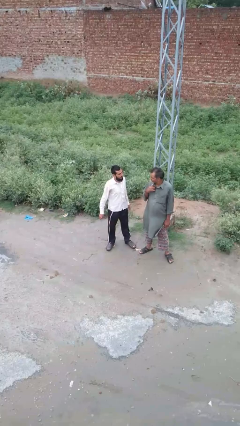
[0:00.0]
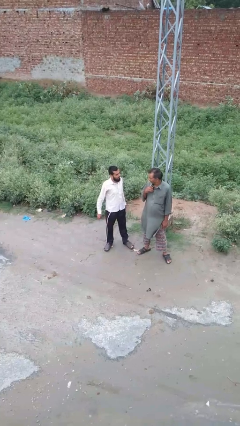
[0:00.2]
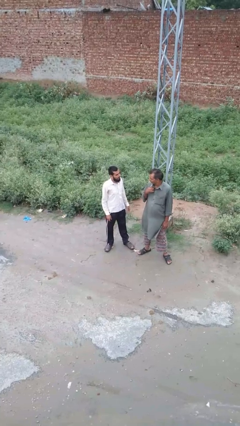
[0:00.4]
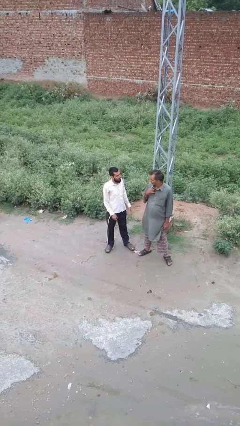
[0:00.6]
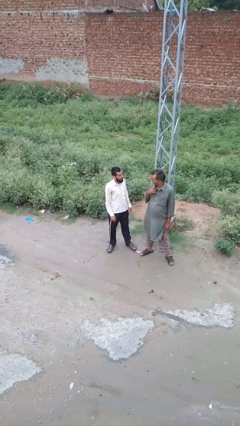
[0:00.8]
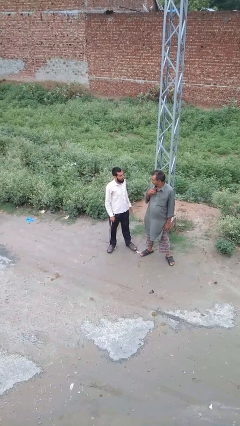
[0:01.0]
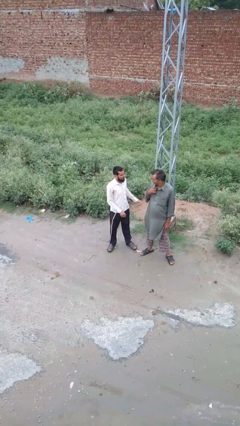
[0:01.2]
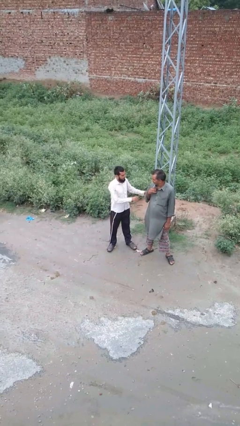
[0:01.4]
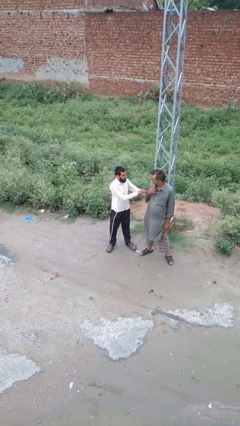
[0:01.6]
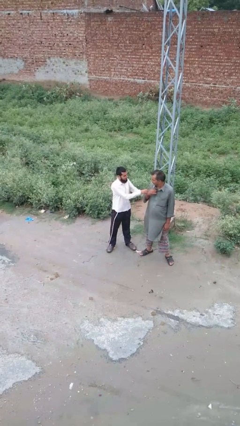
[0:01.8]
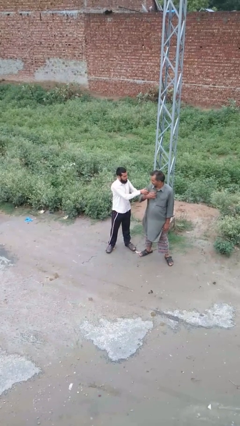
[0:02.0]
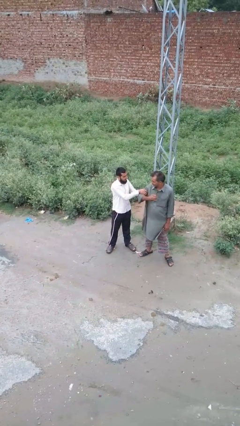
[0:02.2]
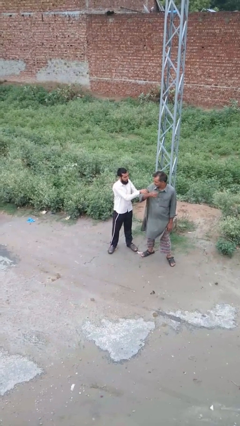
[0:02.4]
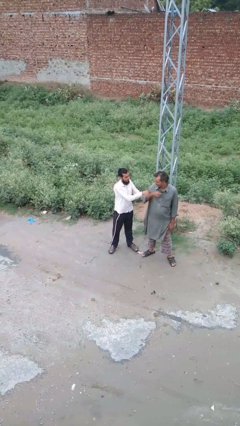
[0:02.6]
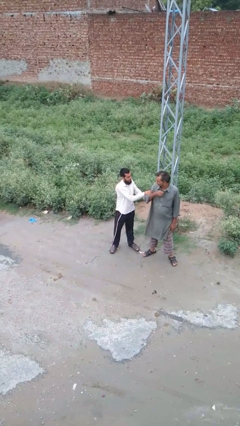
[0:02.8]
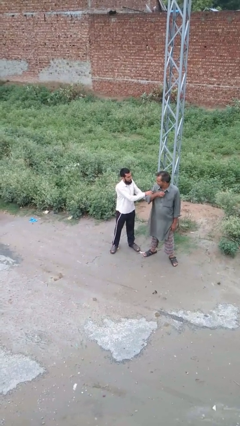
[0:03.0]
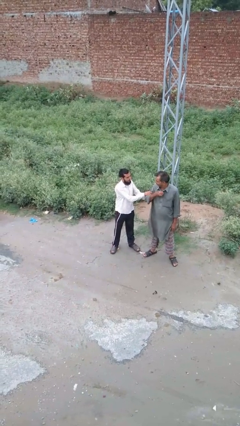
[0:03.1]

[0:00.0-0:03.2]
person grabs person by bicep

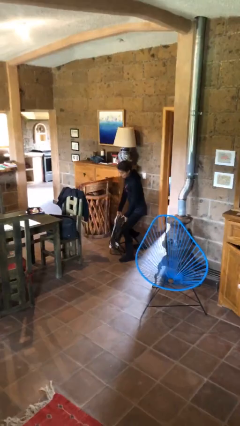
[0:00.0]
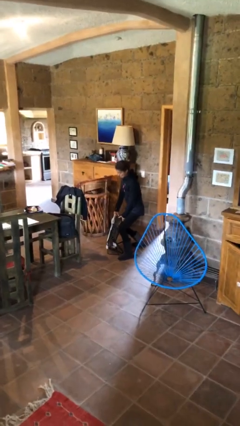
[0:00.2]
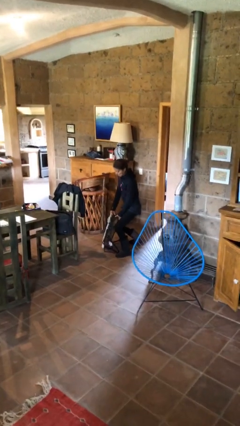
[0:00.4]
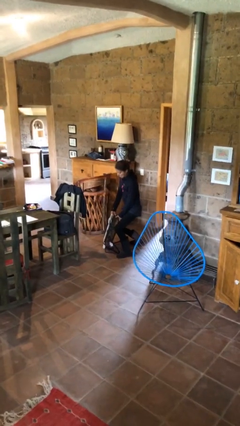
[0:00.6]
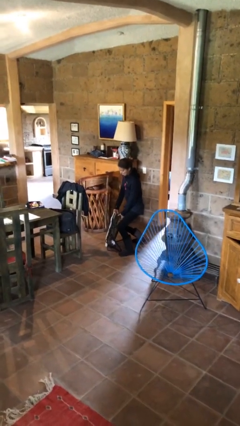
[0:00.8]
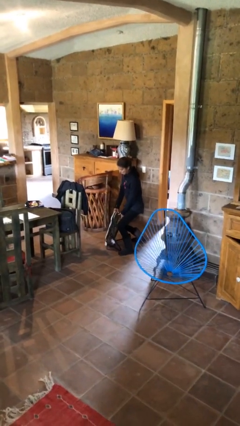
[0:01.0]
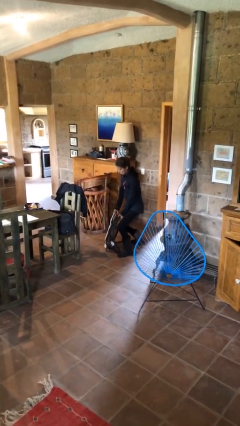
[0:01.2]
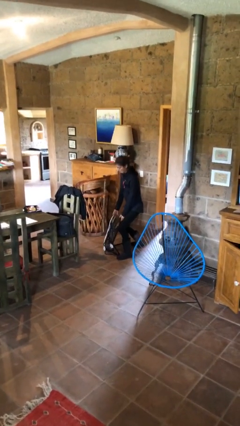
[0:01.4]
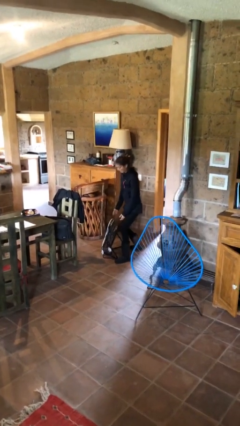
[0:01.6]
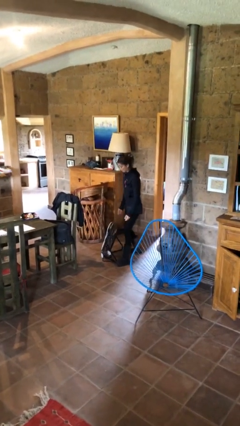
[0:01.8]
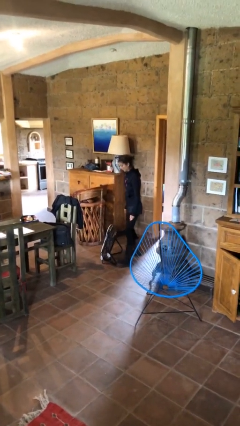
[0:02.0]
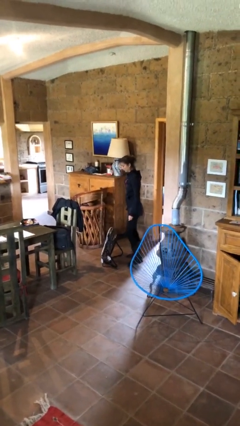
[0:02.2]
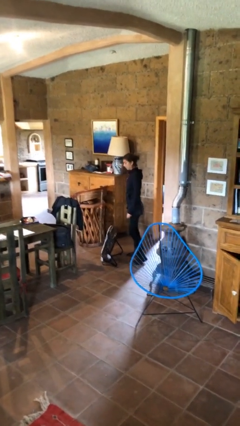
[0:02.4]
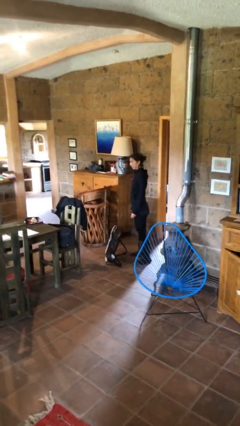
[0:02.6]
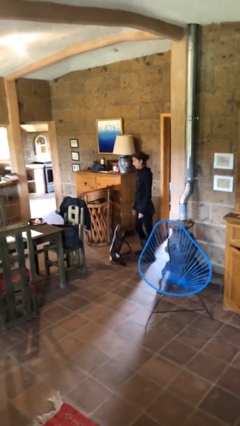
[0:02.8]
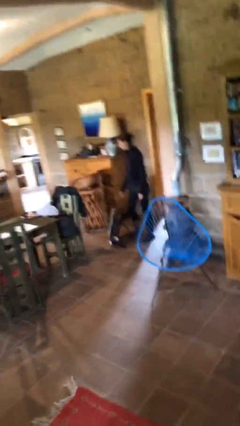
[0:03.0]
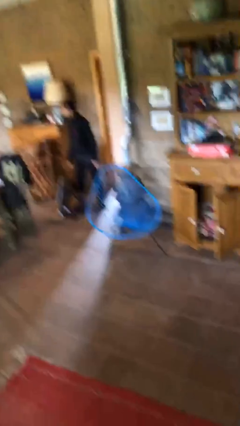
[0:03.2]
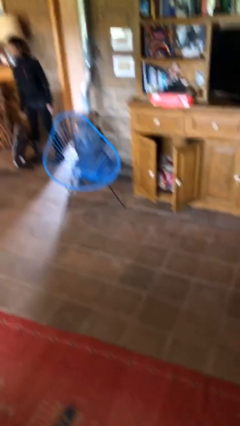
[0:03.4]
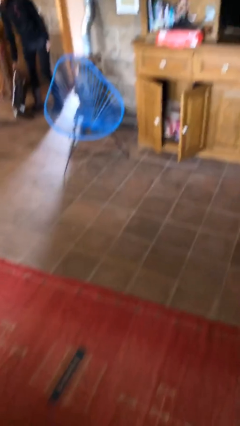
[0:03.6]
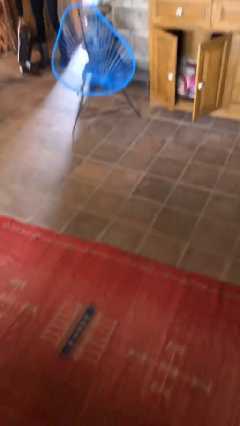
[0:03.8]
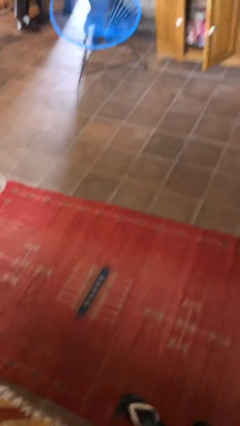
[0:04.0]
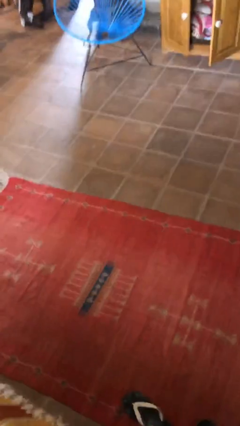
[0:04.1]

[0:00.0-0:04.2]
person puts down object on floor

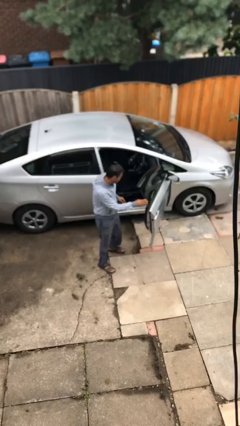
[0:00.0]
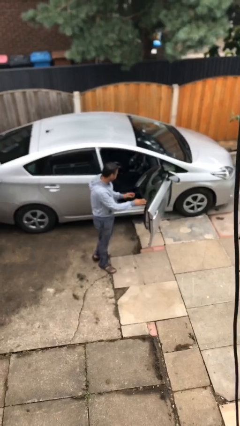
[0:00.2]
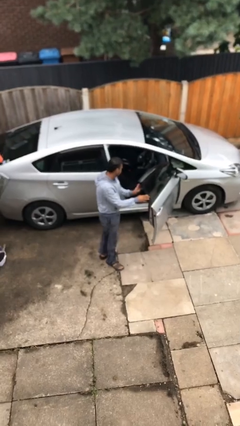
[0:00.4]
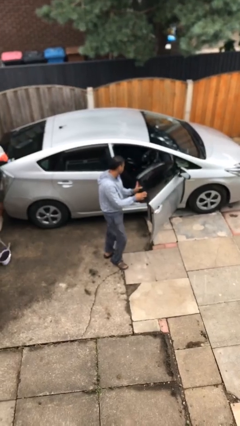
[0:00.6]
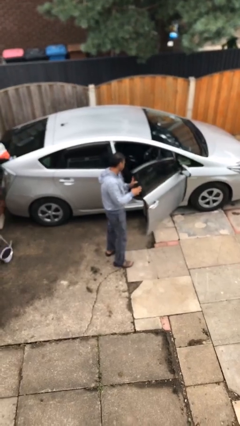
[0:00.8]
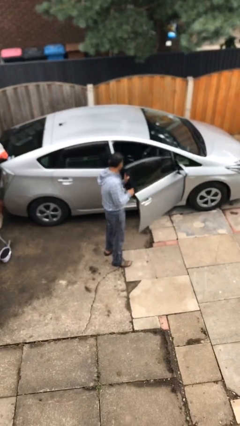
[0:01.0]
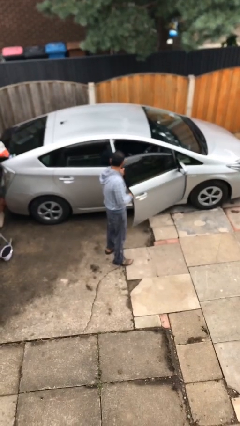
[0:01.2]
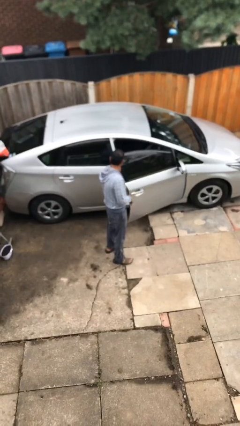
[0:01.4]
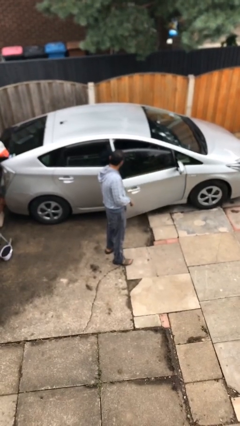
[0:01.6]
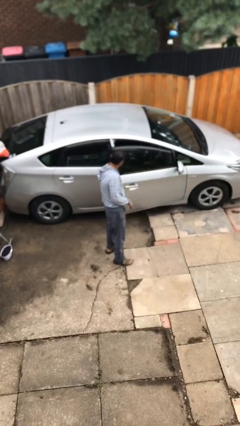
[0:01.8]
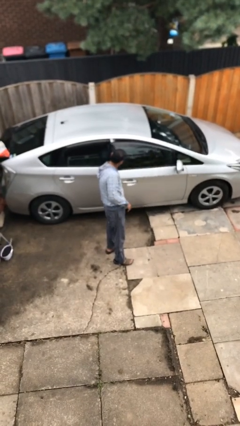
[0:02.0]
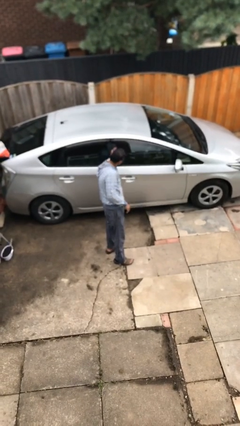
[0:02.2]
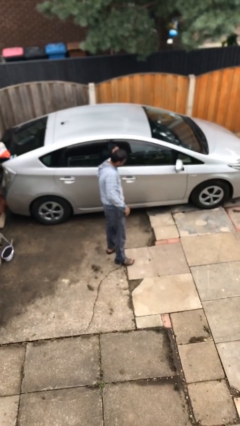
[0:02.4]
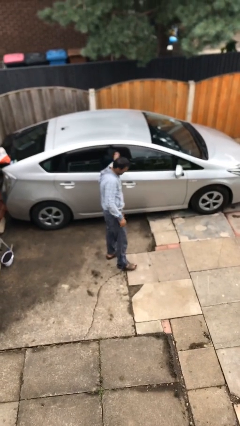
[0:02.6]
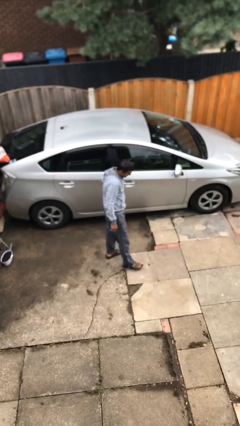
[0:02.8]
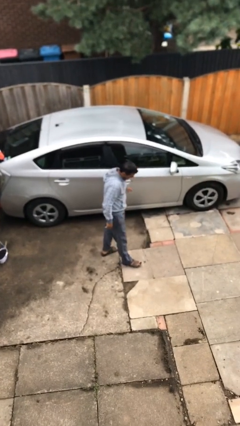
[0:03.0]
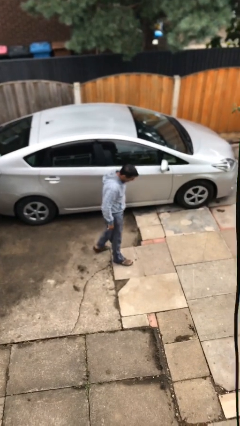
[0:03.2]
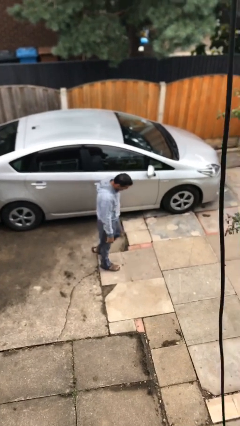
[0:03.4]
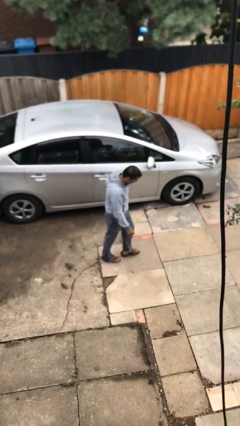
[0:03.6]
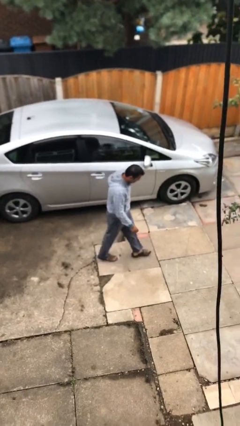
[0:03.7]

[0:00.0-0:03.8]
person closes car door

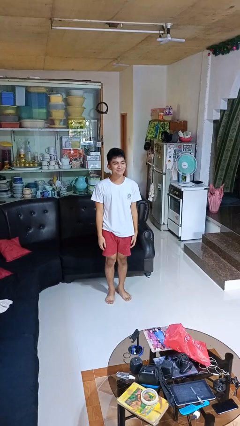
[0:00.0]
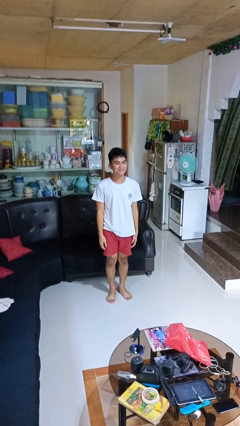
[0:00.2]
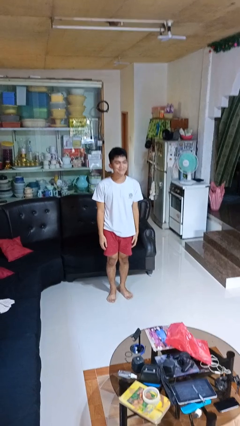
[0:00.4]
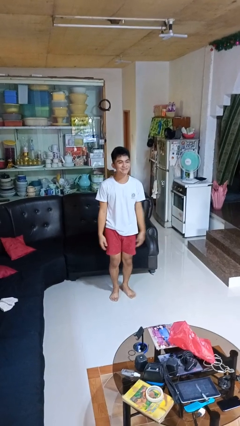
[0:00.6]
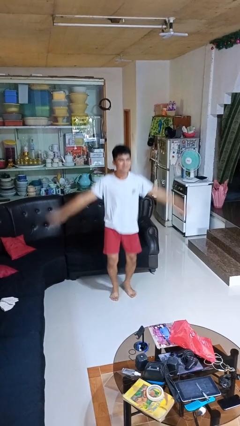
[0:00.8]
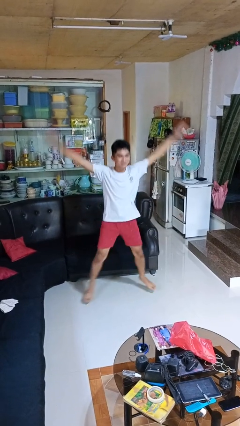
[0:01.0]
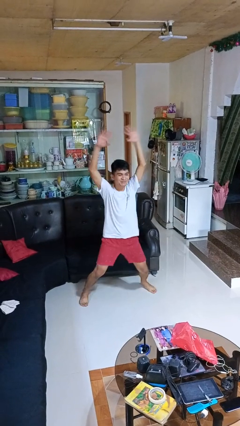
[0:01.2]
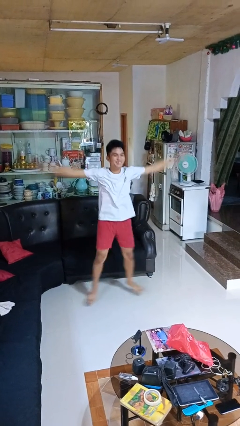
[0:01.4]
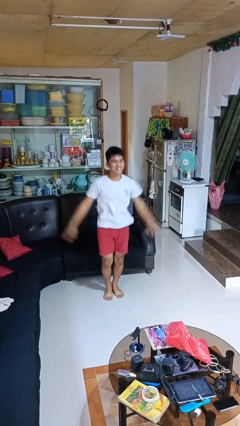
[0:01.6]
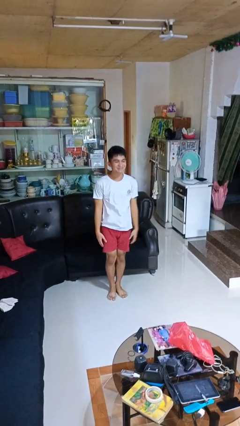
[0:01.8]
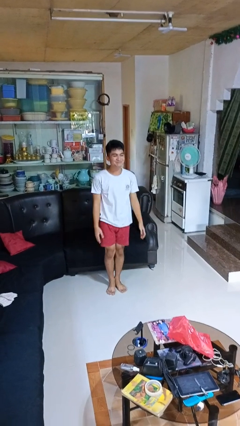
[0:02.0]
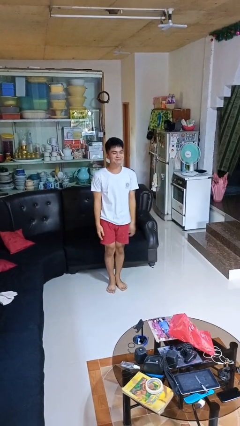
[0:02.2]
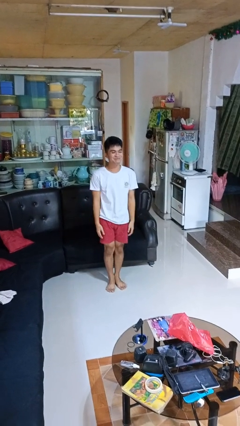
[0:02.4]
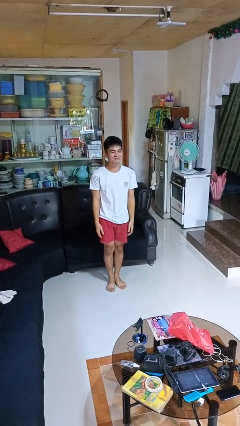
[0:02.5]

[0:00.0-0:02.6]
person exercises with jumping jacks

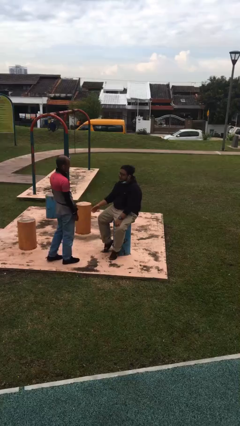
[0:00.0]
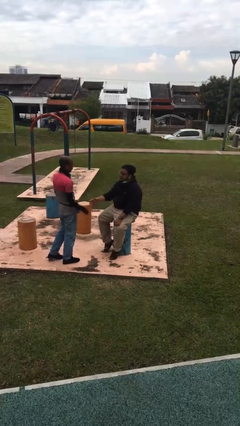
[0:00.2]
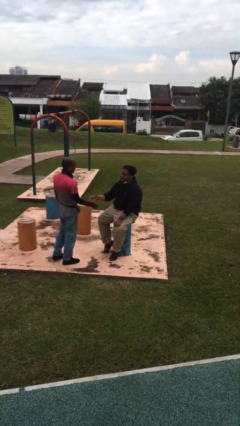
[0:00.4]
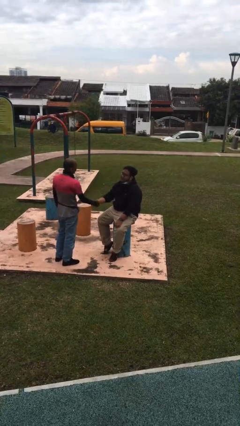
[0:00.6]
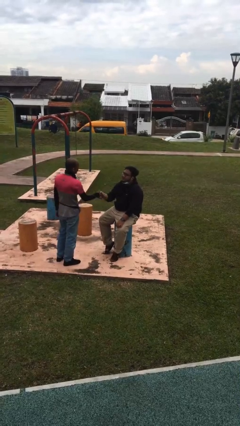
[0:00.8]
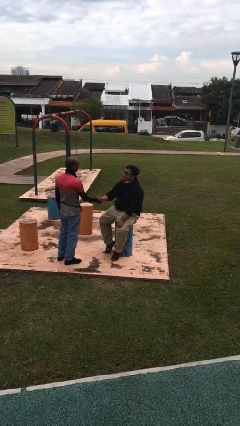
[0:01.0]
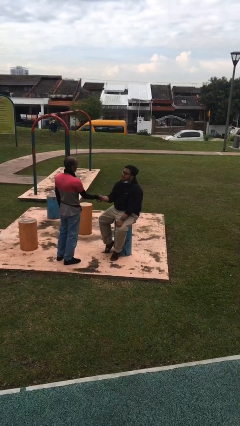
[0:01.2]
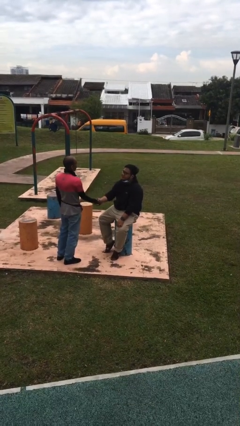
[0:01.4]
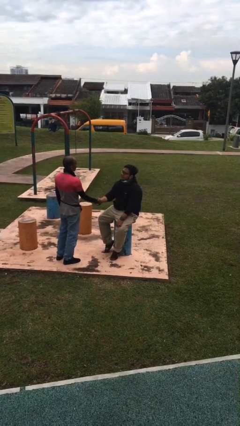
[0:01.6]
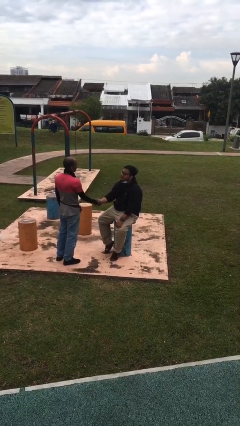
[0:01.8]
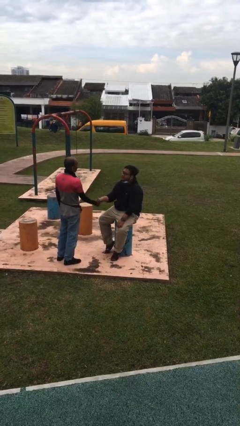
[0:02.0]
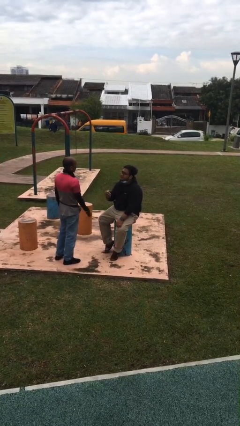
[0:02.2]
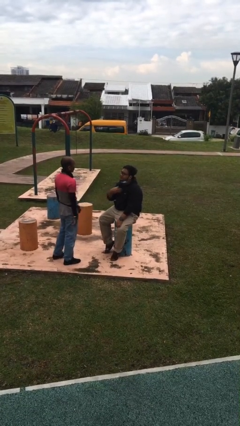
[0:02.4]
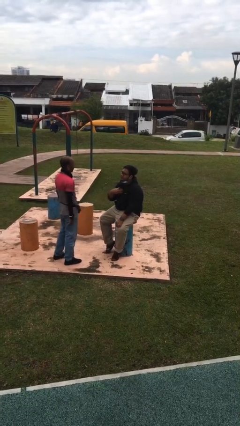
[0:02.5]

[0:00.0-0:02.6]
person shakes hand

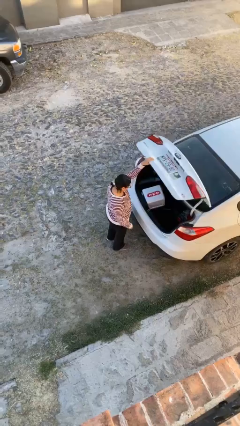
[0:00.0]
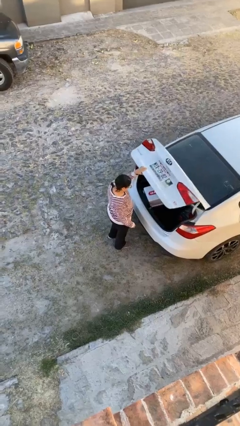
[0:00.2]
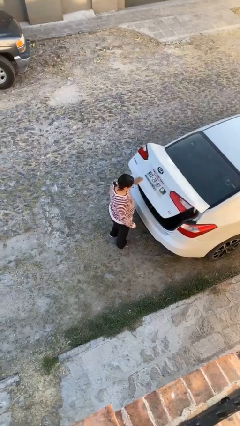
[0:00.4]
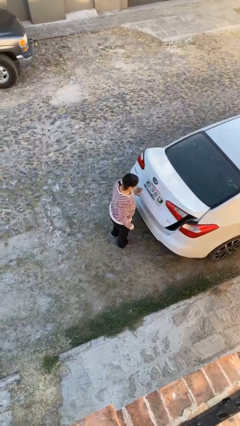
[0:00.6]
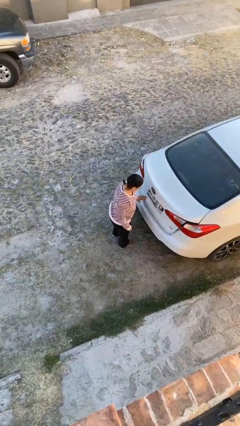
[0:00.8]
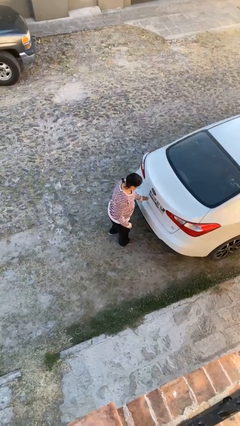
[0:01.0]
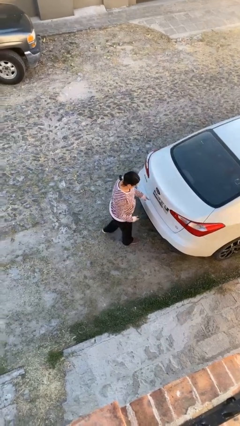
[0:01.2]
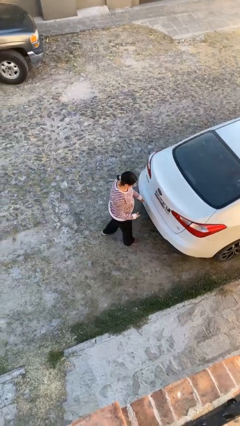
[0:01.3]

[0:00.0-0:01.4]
person closes car trunk
